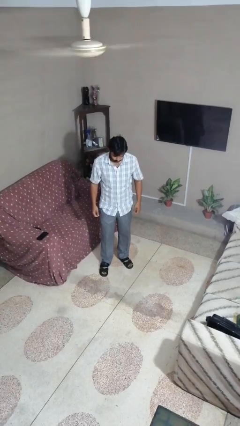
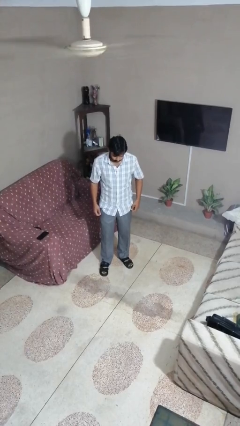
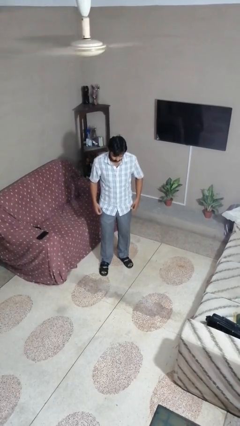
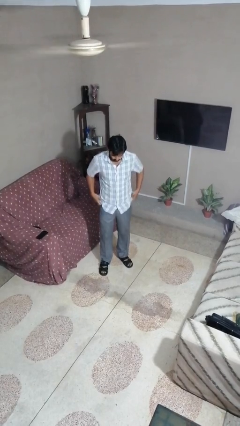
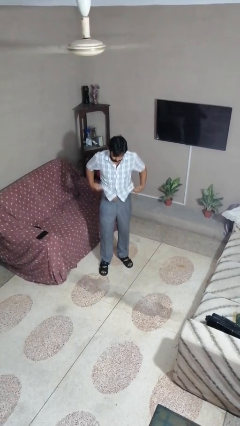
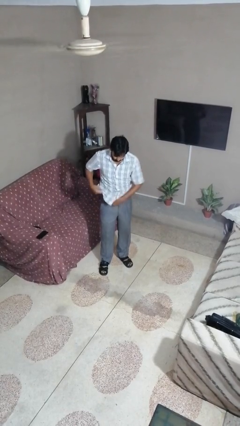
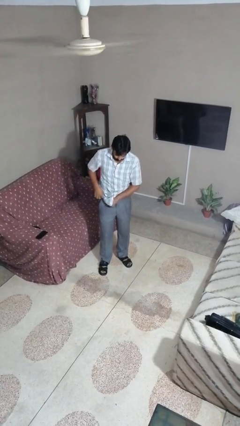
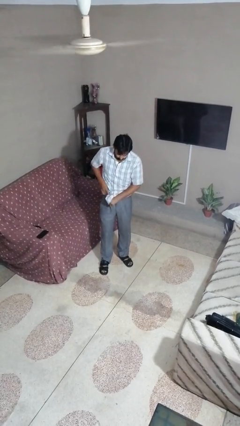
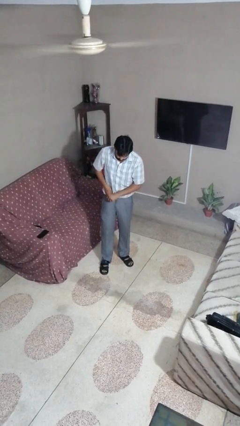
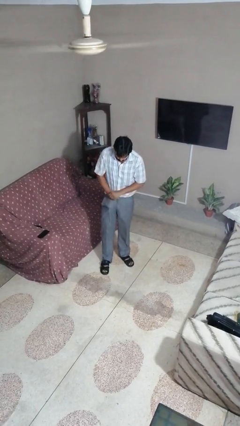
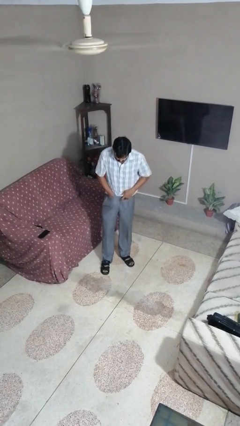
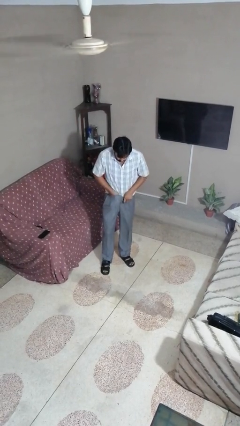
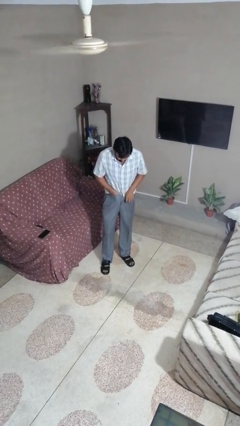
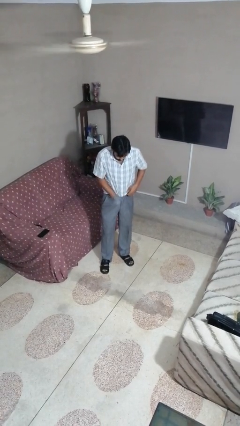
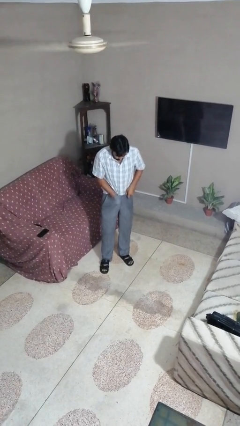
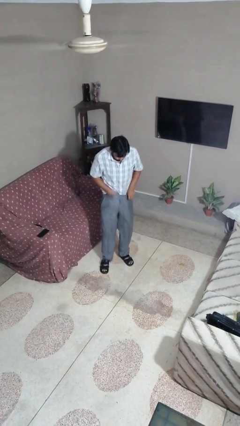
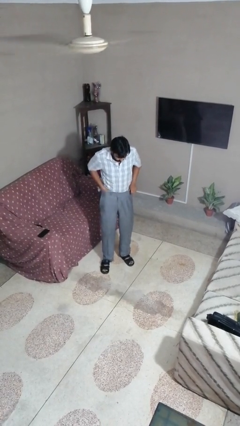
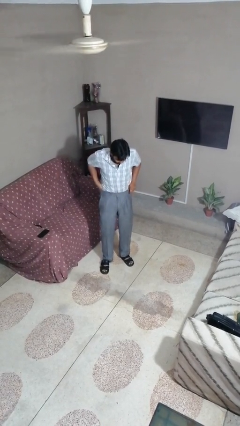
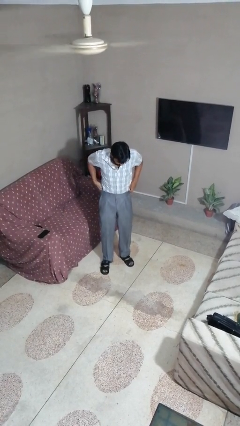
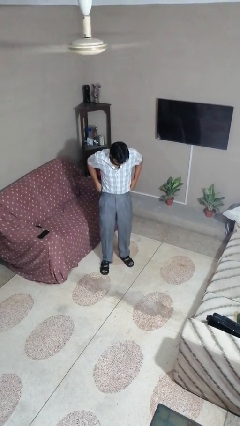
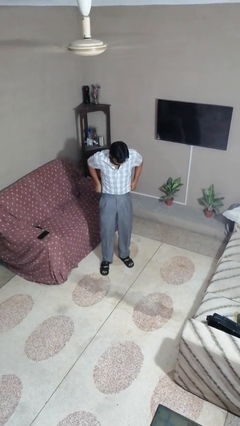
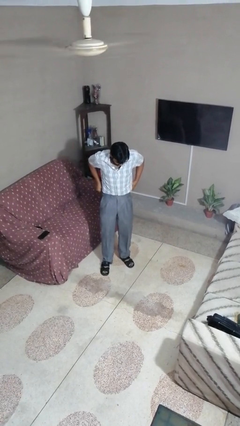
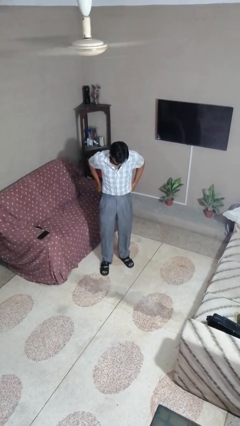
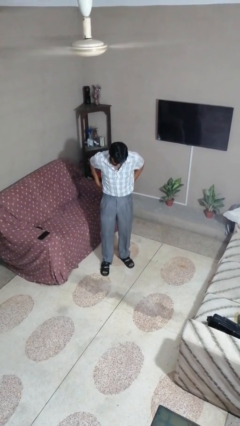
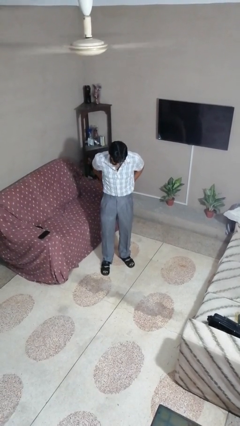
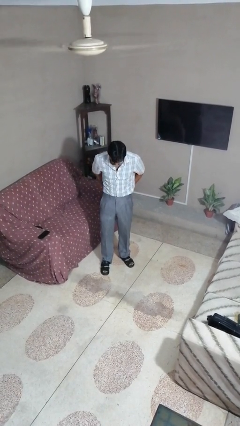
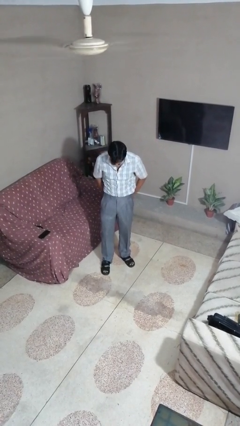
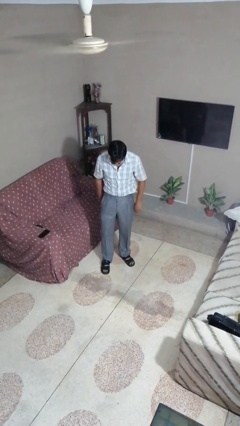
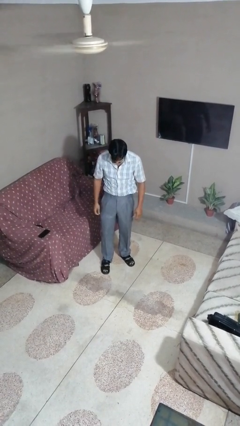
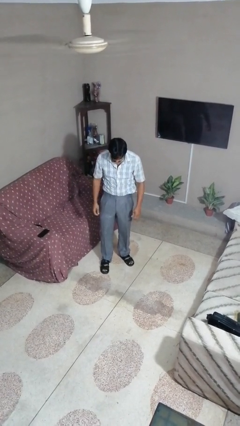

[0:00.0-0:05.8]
person tucks in shirt

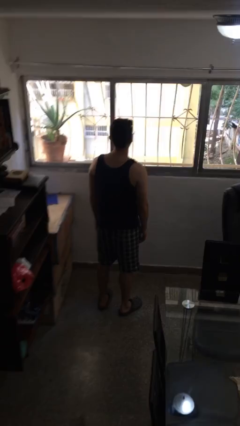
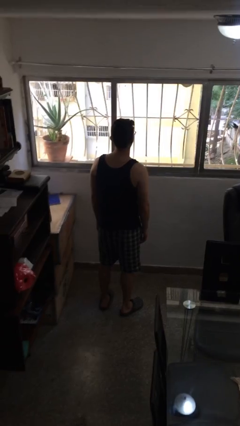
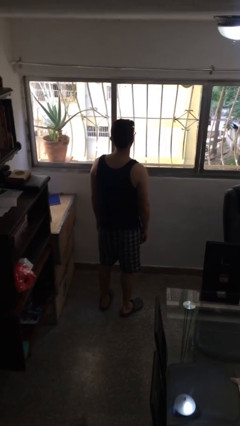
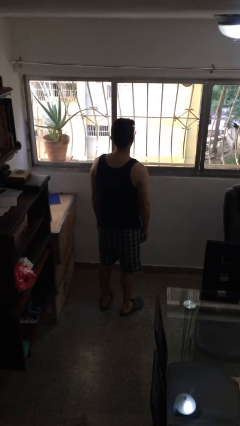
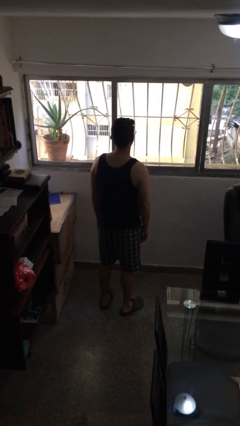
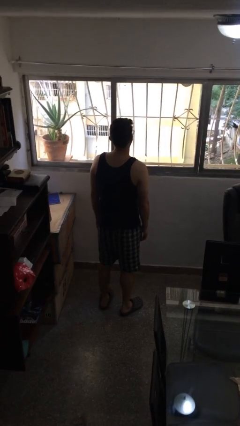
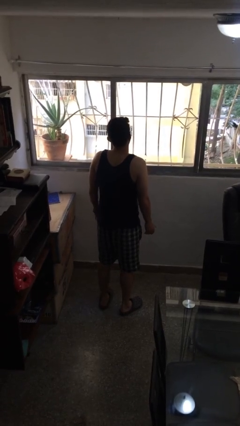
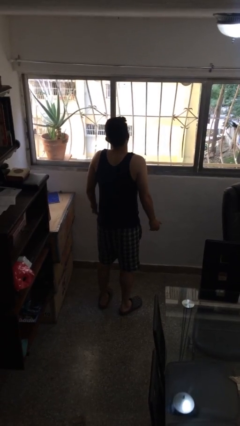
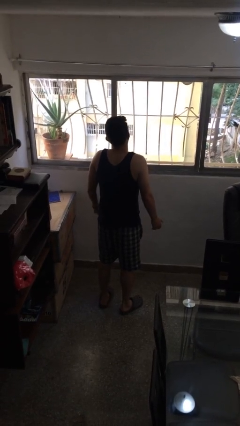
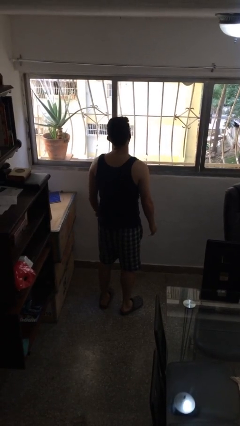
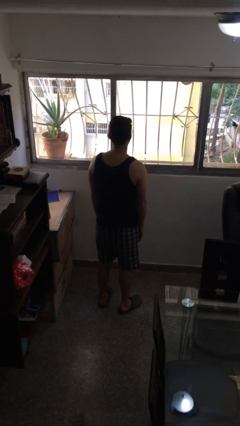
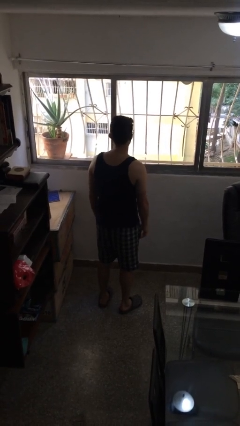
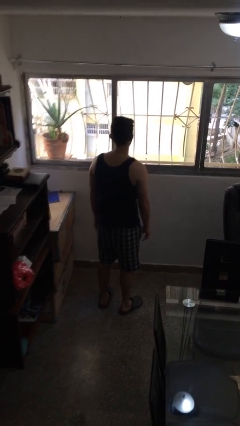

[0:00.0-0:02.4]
person shrugs

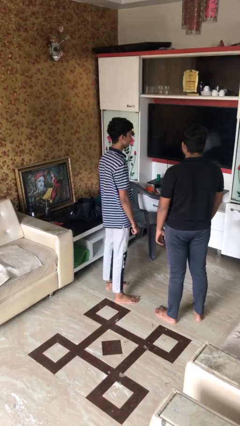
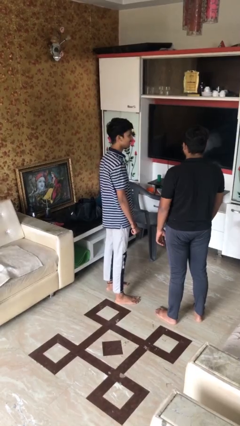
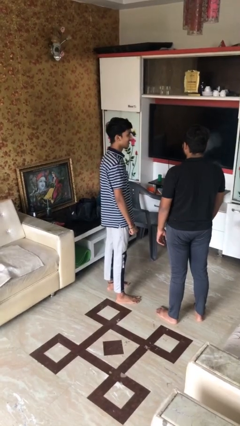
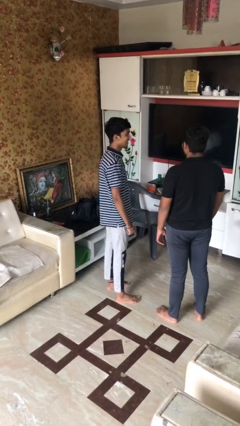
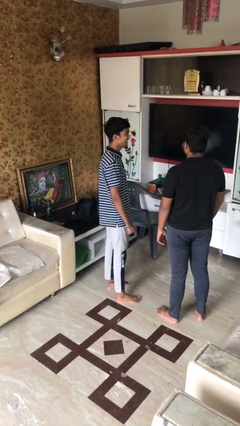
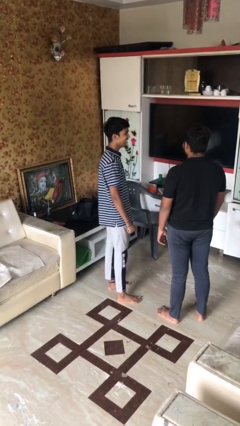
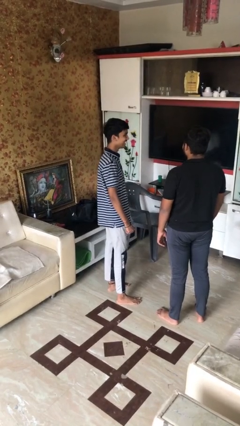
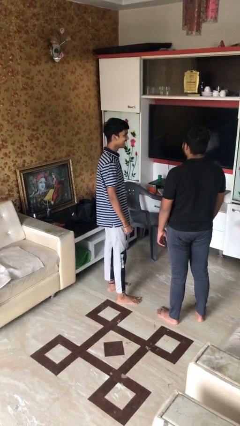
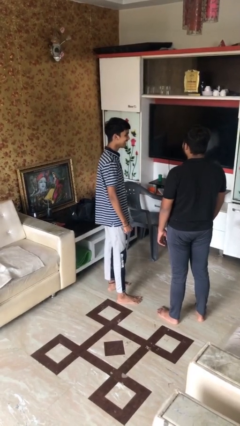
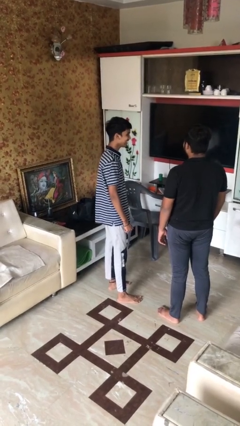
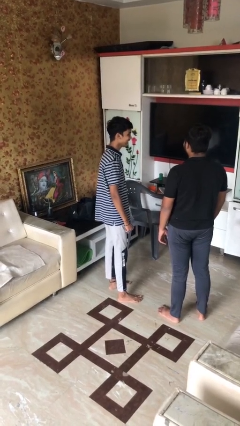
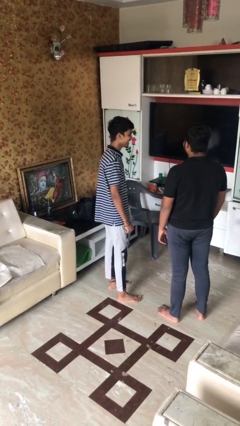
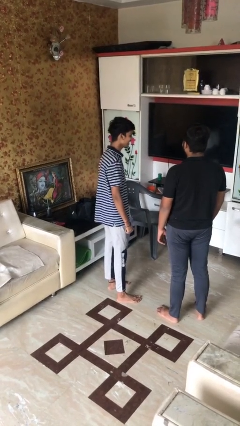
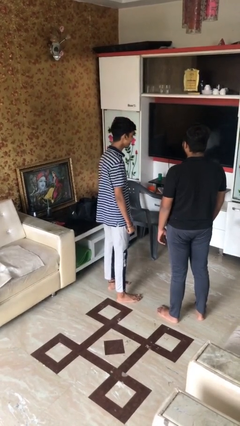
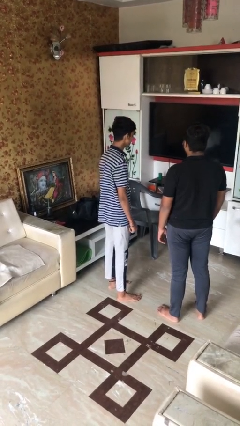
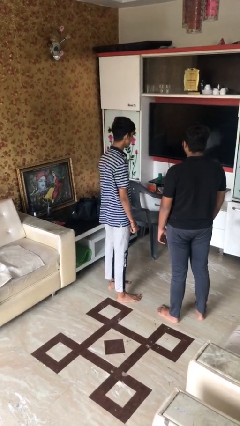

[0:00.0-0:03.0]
person laughs with person

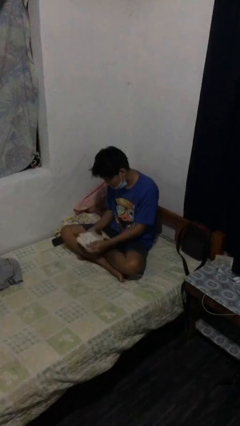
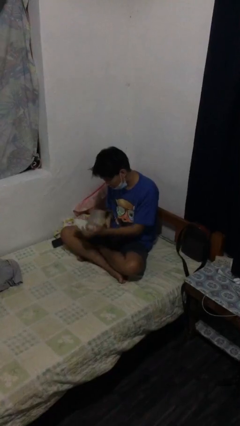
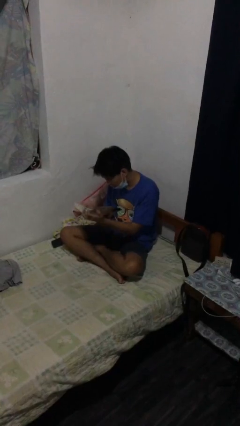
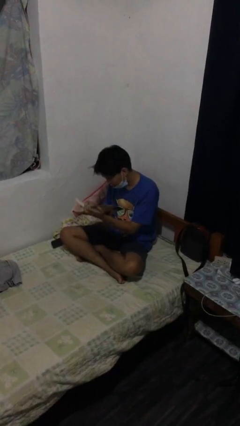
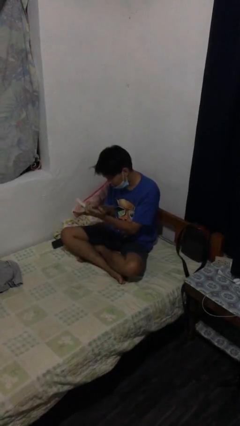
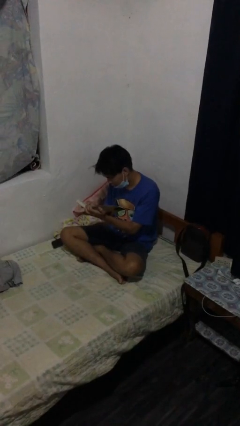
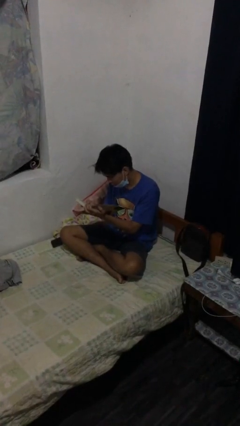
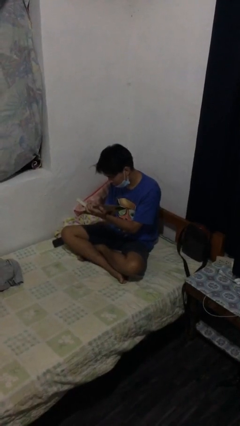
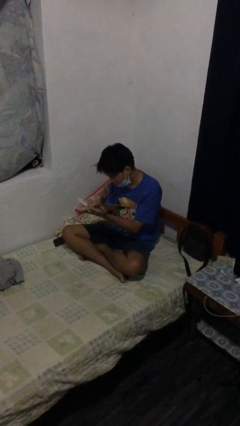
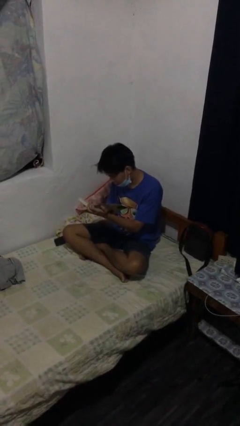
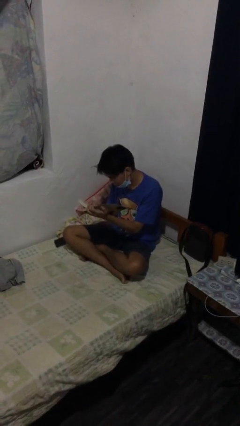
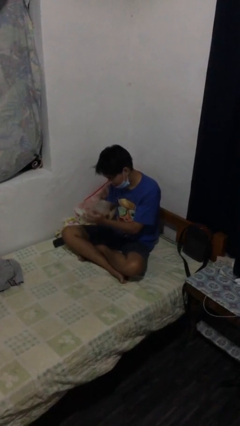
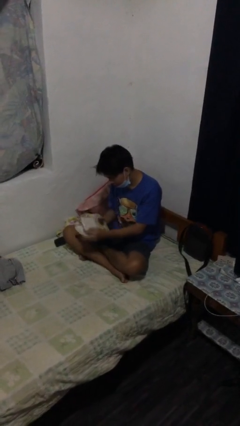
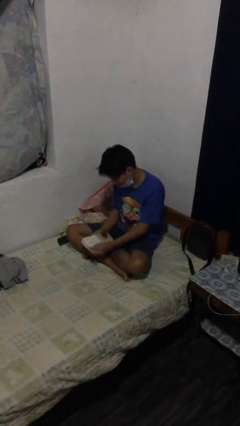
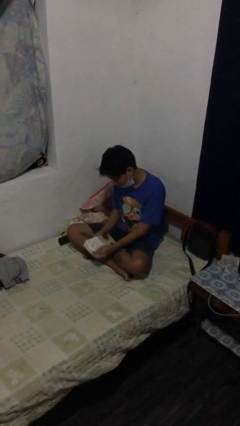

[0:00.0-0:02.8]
person reads document

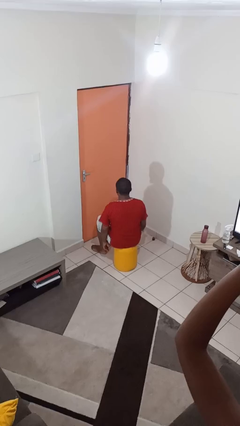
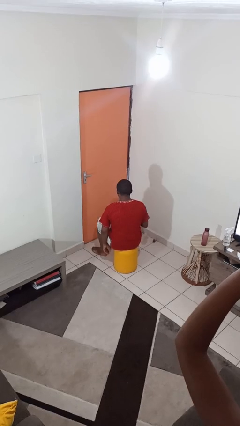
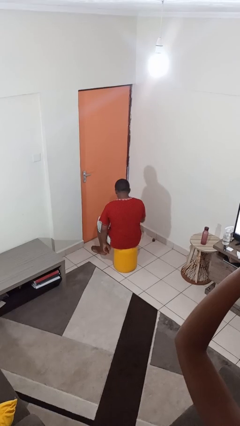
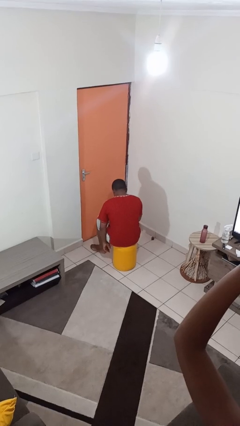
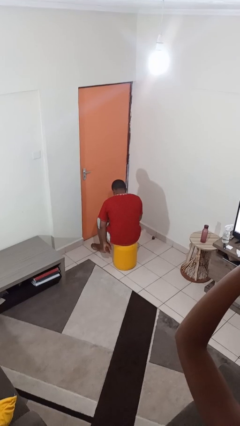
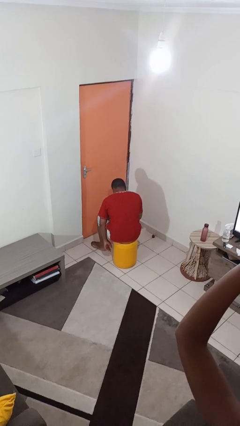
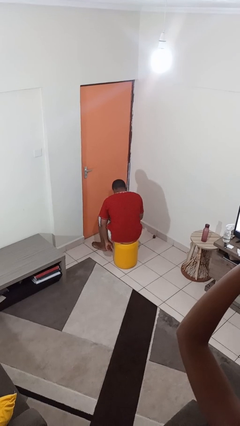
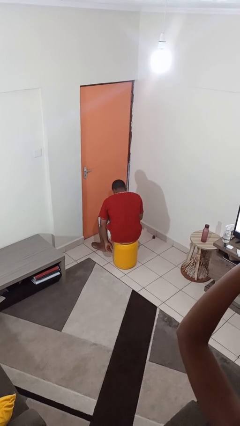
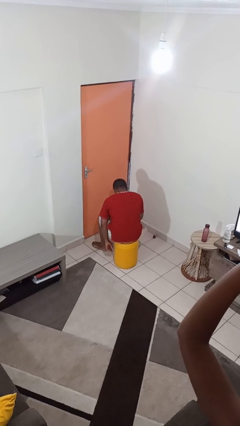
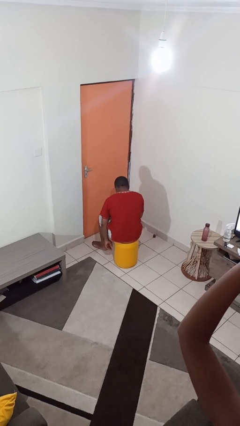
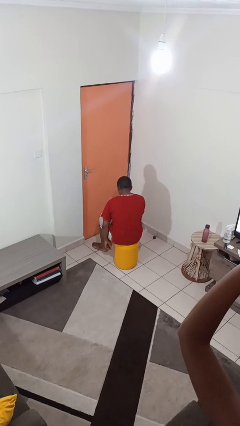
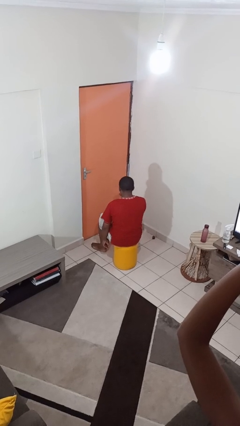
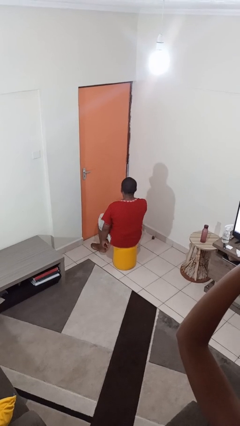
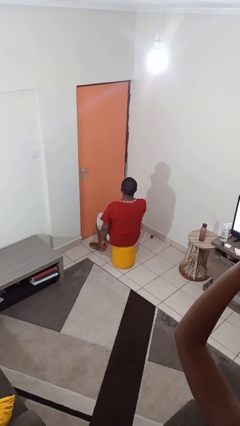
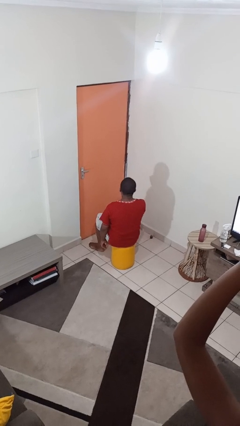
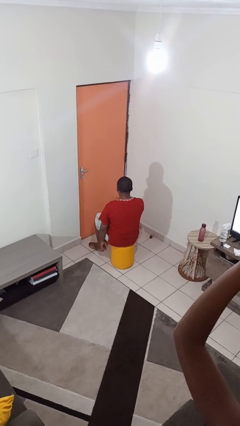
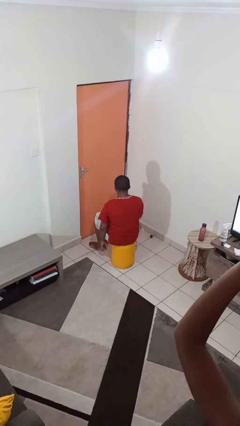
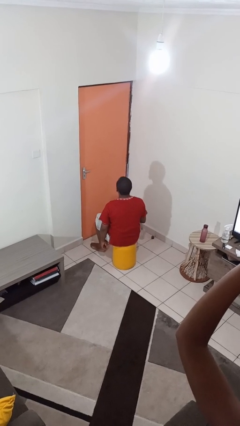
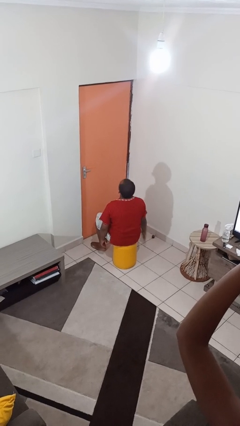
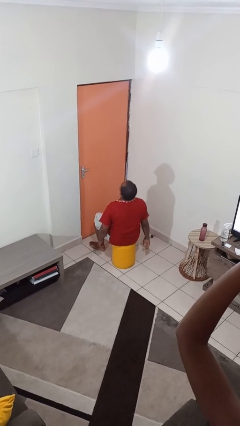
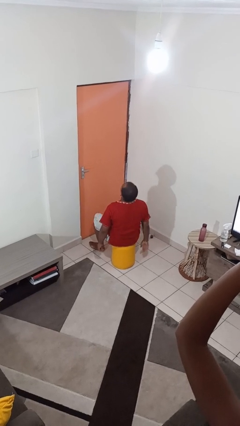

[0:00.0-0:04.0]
person yawns
